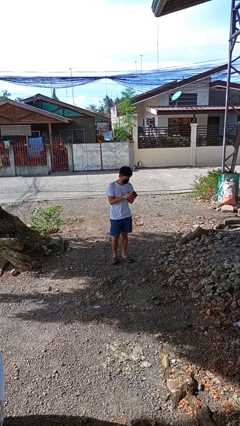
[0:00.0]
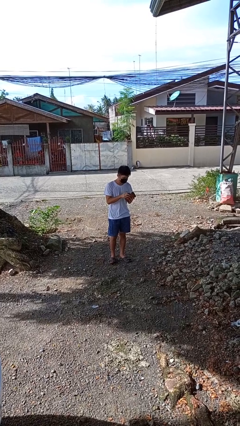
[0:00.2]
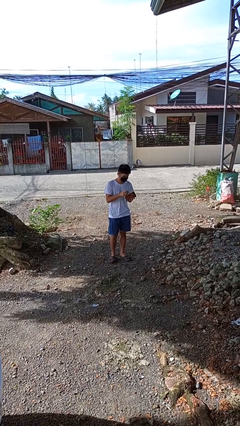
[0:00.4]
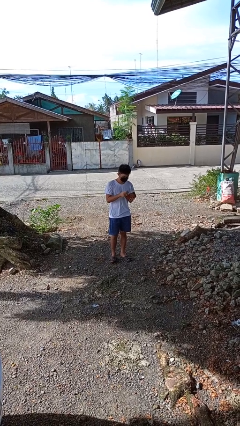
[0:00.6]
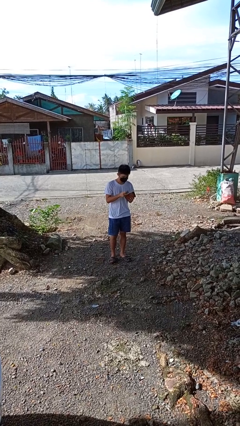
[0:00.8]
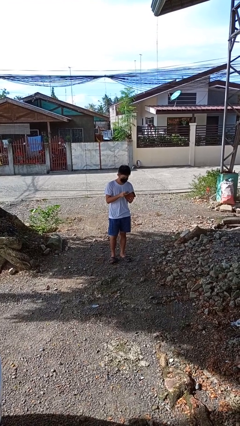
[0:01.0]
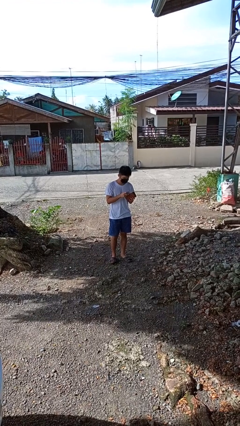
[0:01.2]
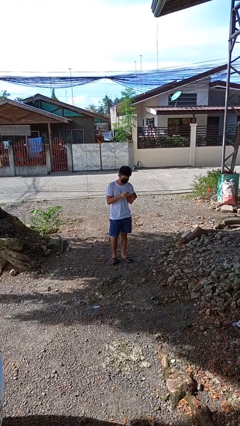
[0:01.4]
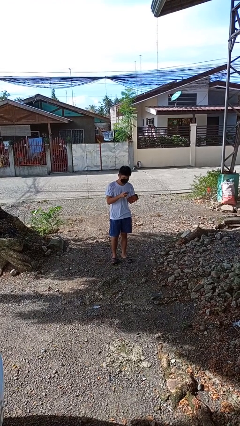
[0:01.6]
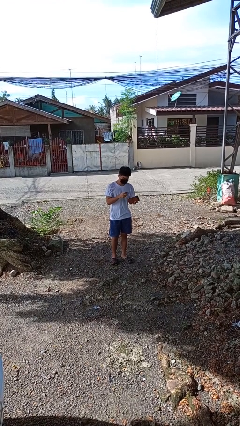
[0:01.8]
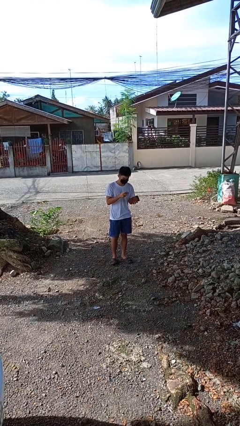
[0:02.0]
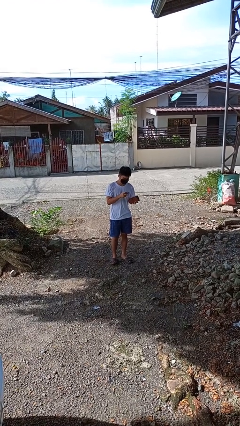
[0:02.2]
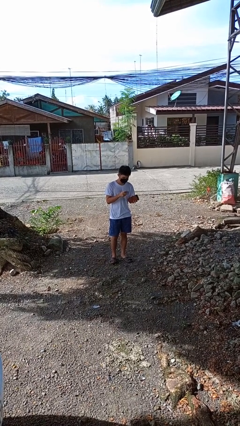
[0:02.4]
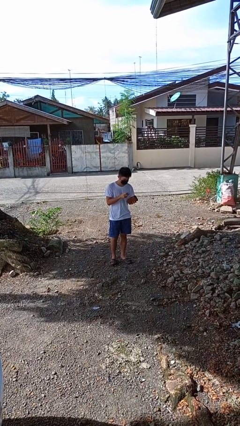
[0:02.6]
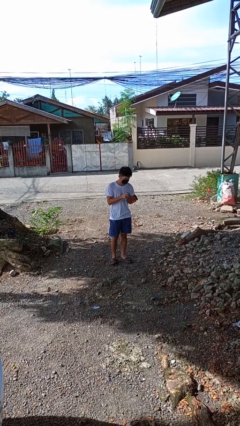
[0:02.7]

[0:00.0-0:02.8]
person takes object from purse

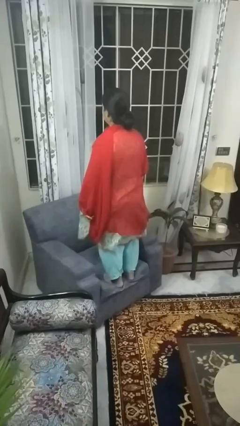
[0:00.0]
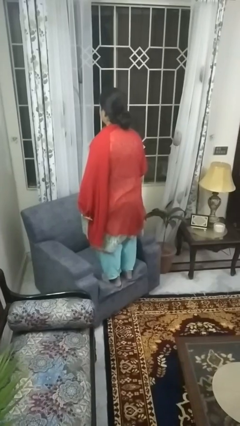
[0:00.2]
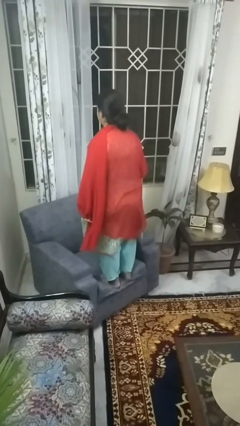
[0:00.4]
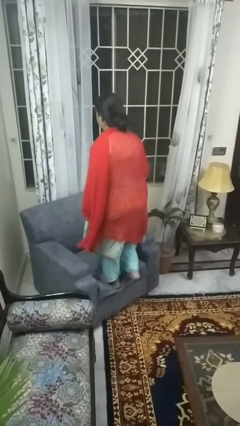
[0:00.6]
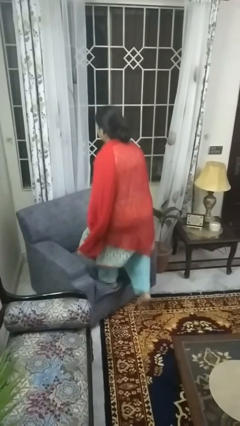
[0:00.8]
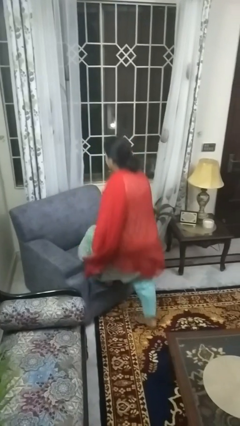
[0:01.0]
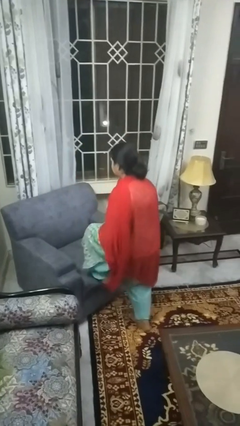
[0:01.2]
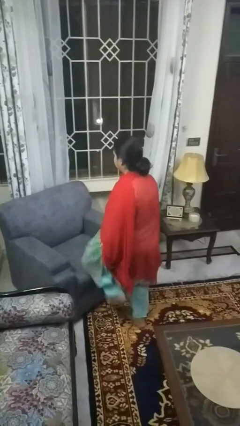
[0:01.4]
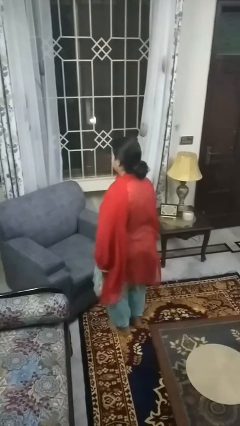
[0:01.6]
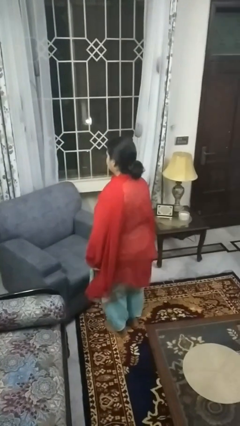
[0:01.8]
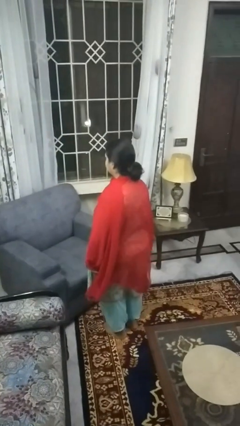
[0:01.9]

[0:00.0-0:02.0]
person climbs off couch

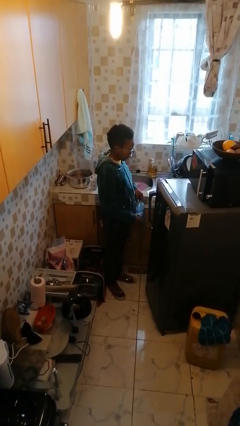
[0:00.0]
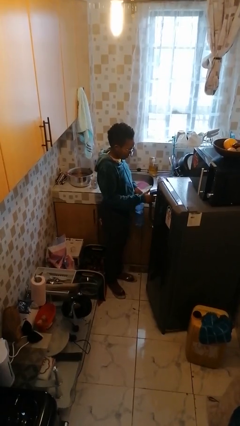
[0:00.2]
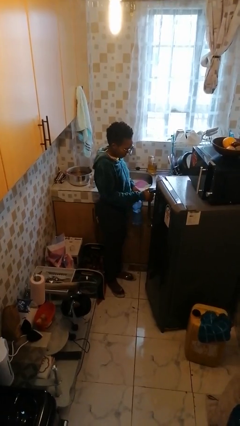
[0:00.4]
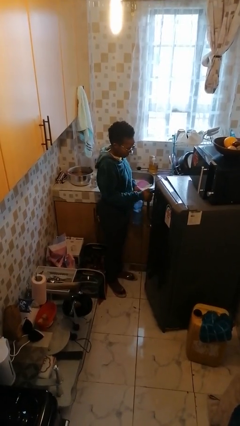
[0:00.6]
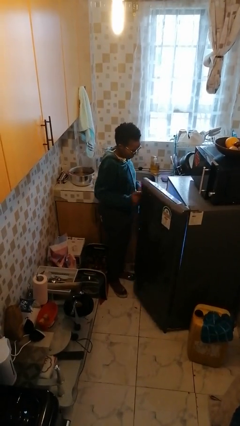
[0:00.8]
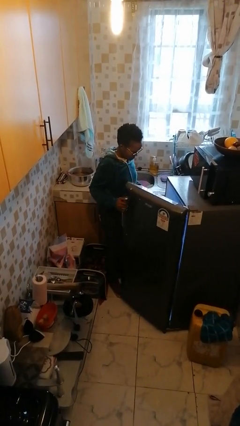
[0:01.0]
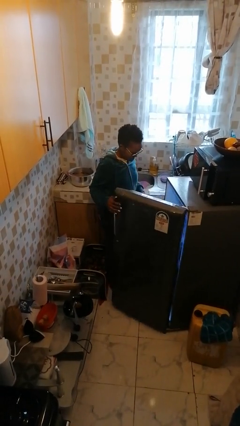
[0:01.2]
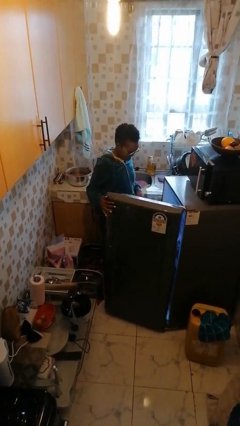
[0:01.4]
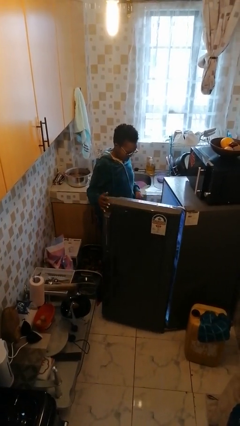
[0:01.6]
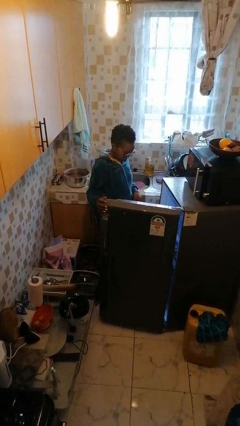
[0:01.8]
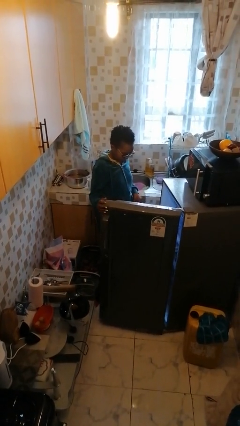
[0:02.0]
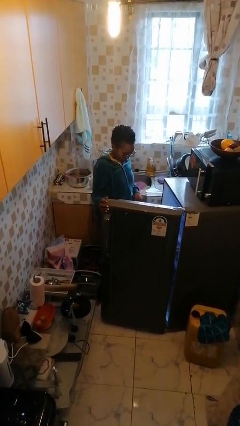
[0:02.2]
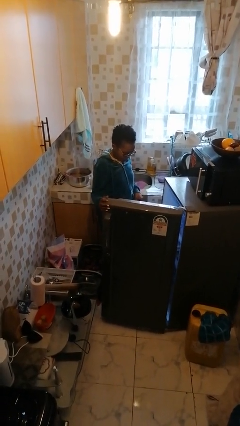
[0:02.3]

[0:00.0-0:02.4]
person opens refrigerator

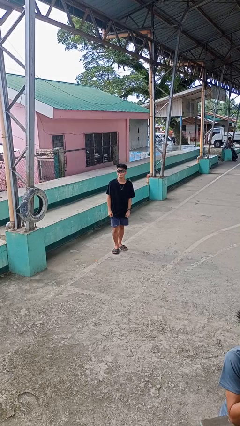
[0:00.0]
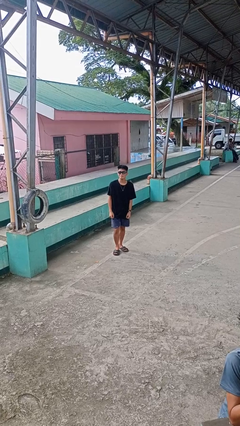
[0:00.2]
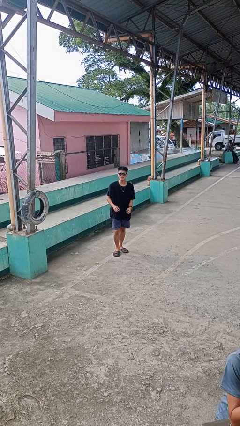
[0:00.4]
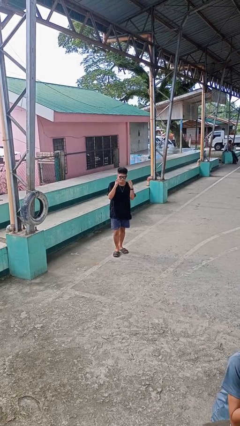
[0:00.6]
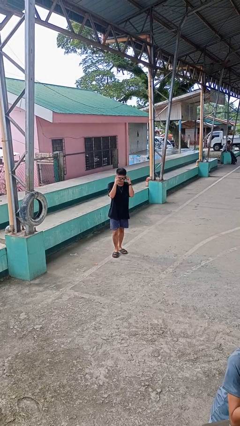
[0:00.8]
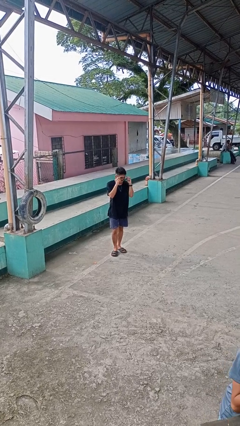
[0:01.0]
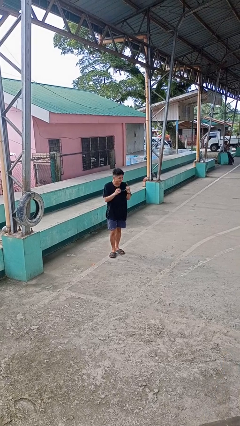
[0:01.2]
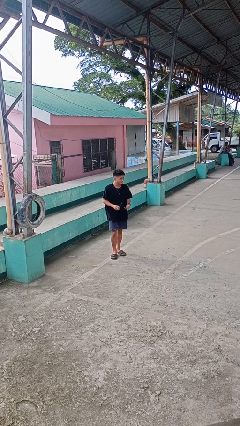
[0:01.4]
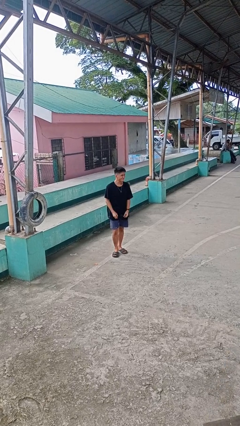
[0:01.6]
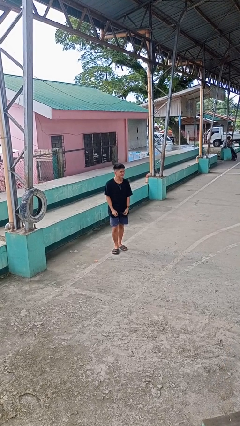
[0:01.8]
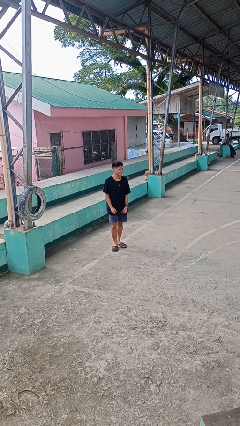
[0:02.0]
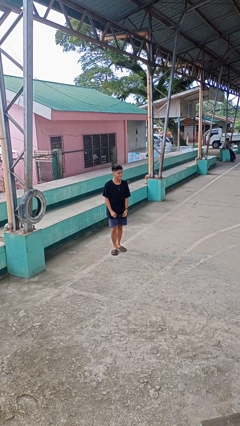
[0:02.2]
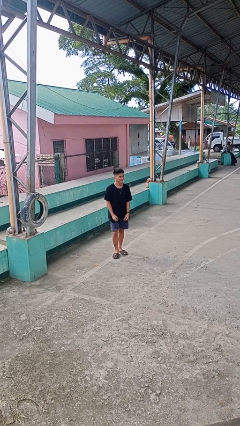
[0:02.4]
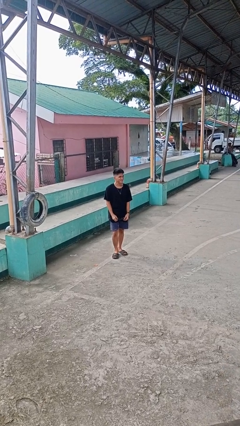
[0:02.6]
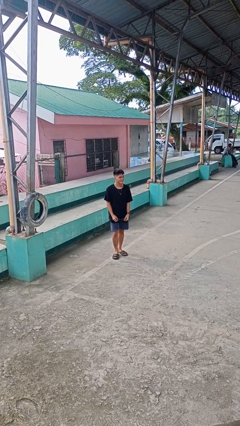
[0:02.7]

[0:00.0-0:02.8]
person takes off sunglasses

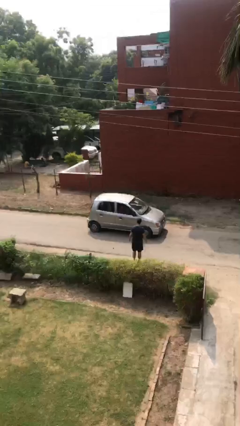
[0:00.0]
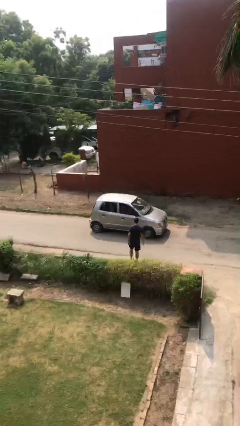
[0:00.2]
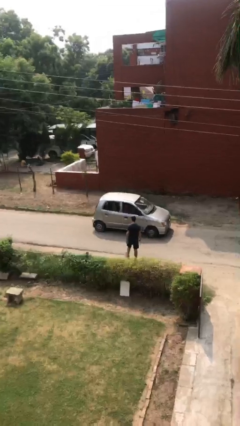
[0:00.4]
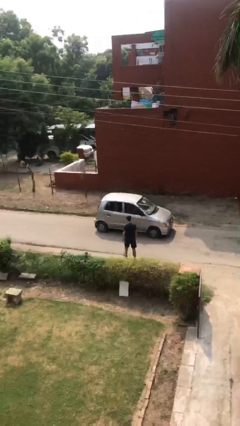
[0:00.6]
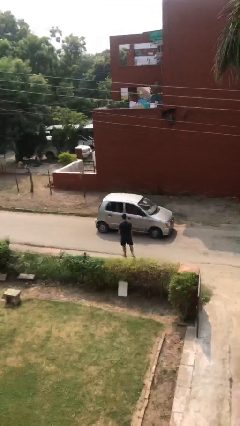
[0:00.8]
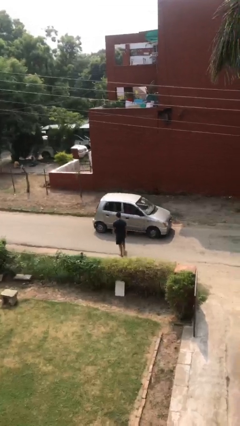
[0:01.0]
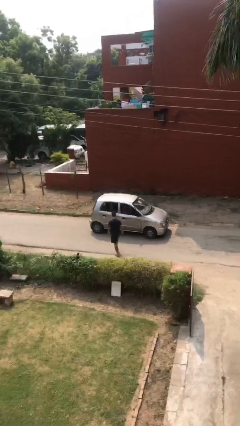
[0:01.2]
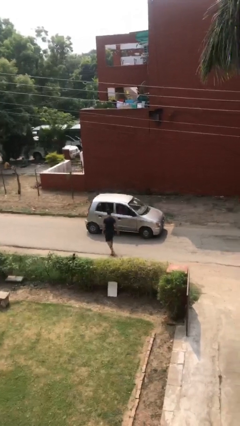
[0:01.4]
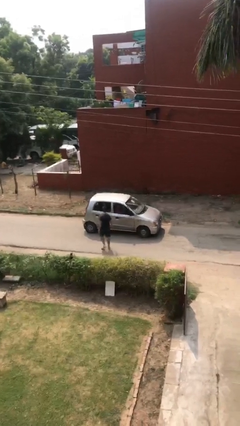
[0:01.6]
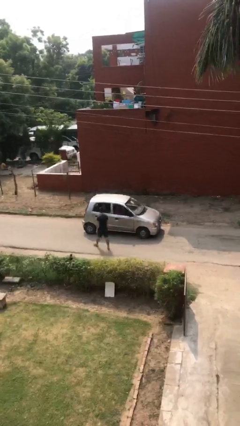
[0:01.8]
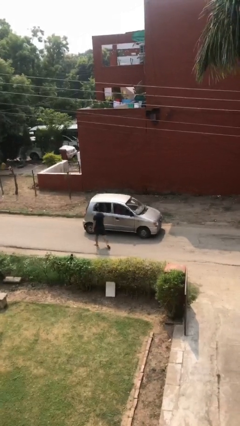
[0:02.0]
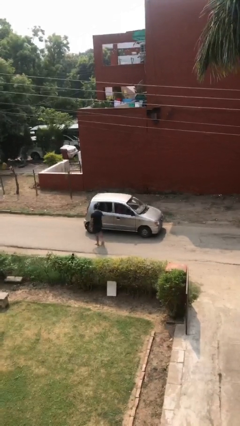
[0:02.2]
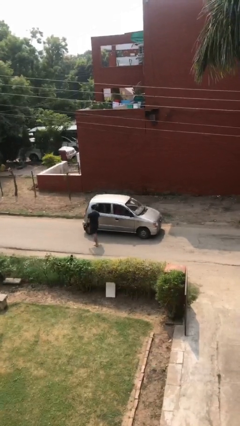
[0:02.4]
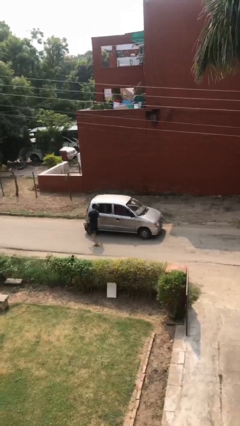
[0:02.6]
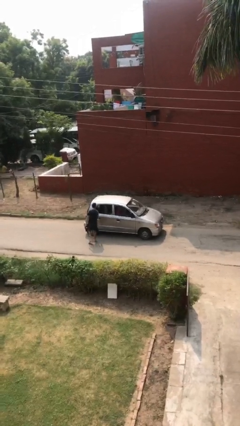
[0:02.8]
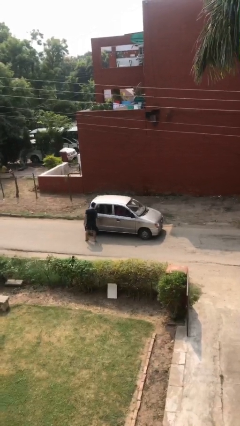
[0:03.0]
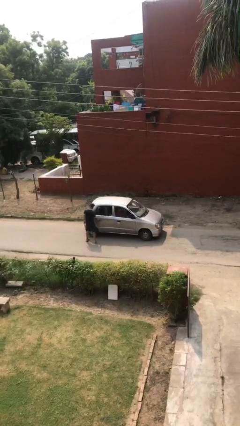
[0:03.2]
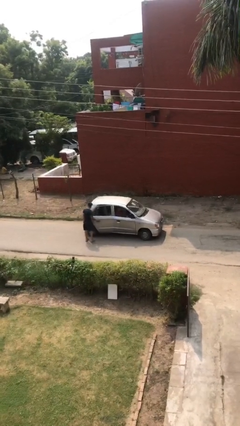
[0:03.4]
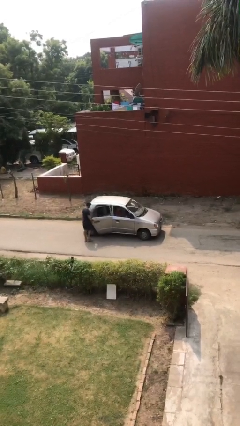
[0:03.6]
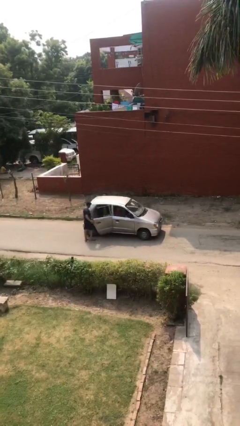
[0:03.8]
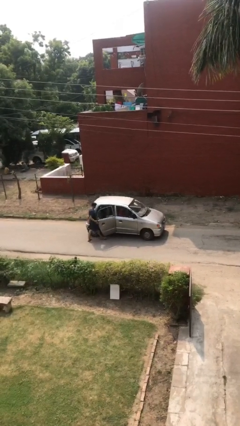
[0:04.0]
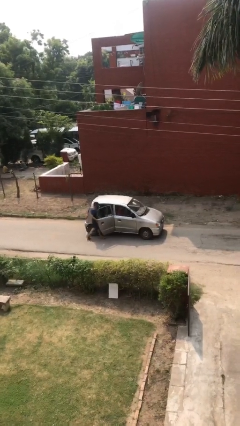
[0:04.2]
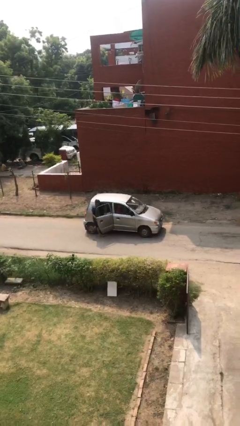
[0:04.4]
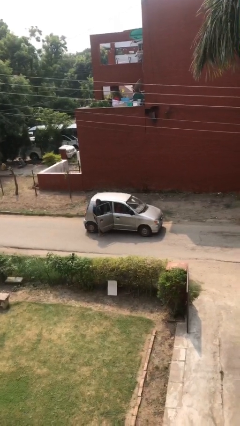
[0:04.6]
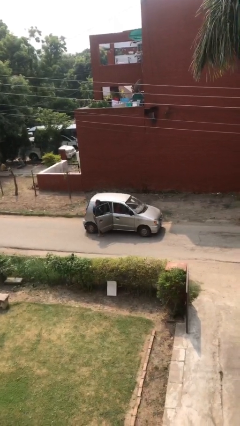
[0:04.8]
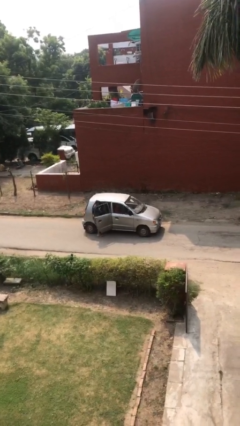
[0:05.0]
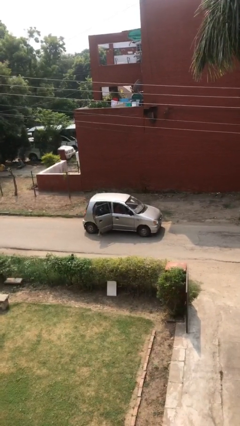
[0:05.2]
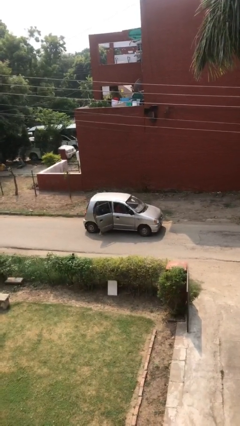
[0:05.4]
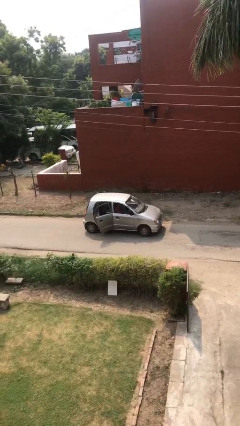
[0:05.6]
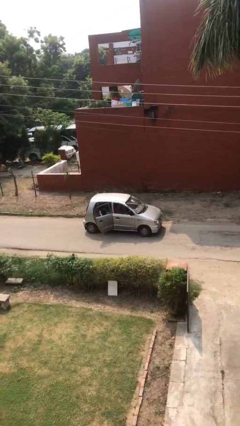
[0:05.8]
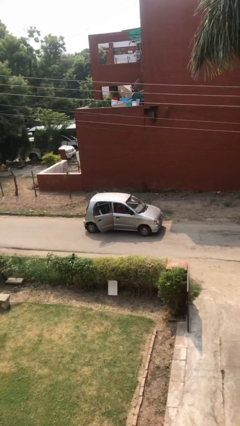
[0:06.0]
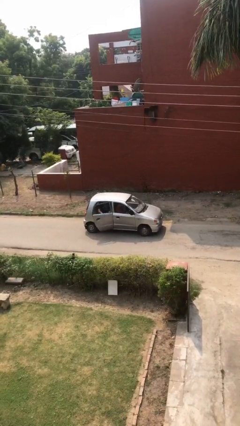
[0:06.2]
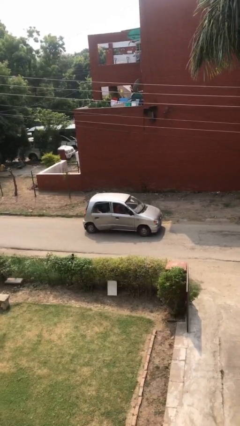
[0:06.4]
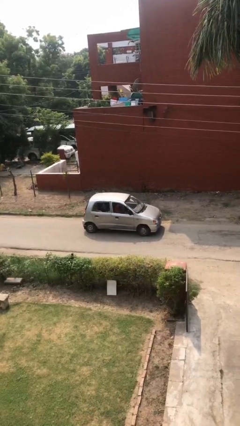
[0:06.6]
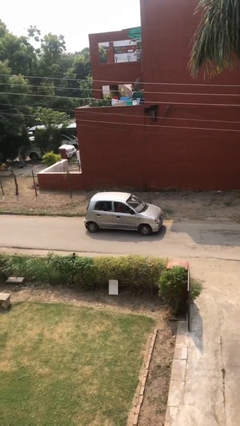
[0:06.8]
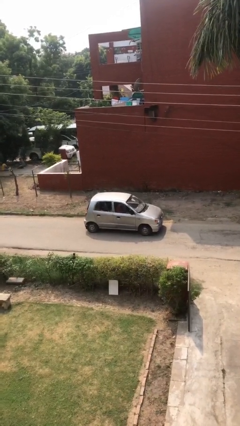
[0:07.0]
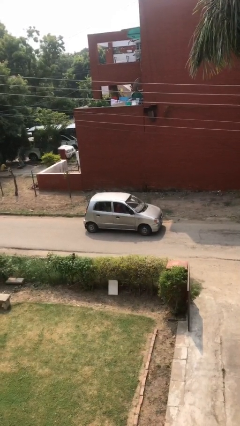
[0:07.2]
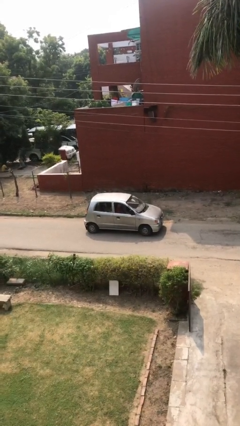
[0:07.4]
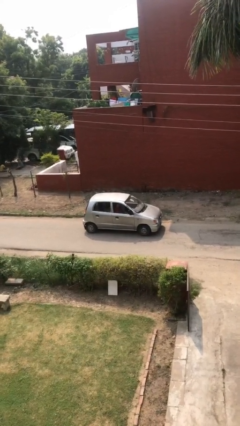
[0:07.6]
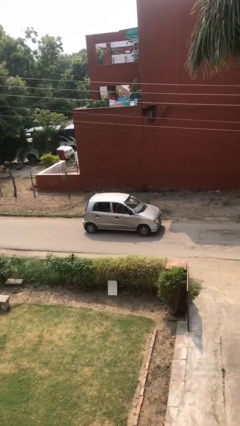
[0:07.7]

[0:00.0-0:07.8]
car picks up person
